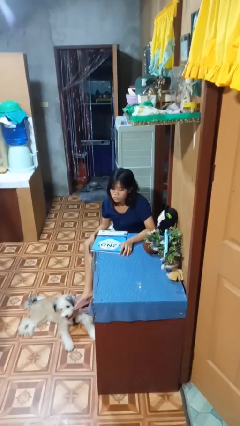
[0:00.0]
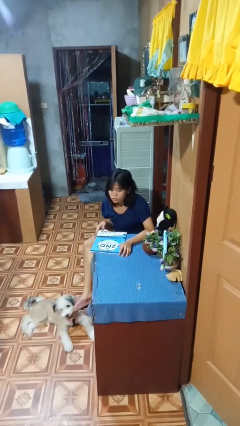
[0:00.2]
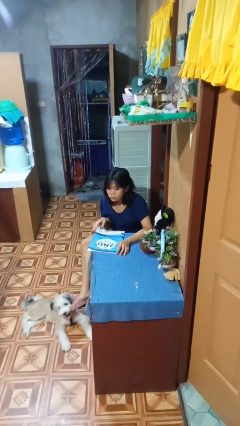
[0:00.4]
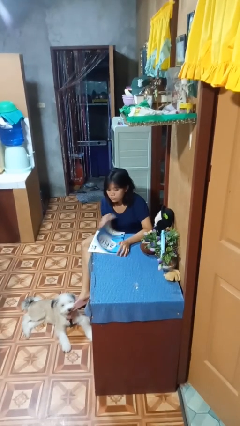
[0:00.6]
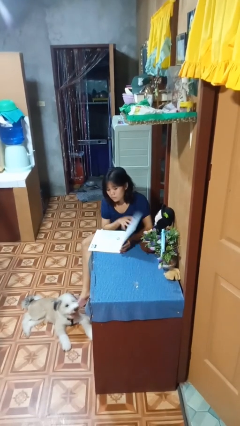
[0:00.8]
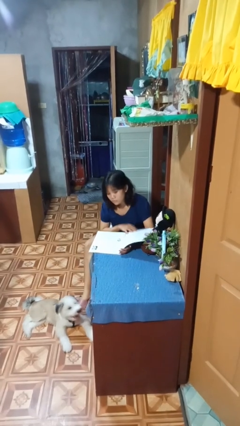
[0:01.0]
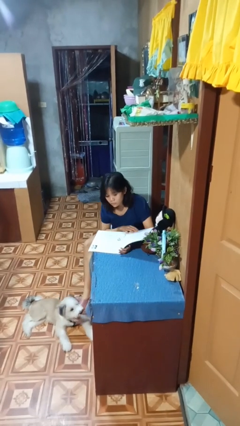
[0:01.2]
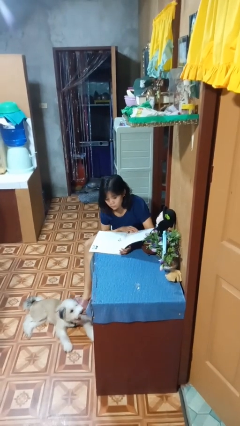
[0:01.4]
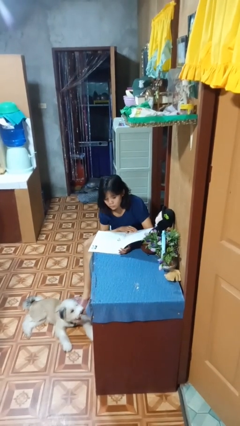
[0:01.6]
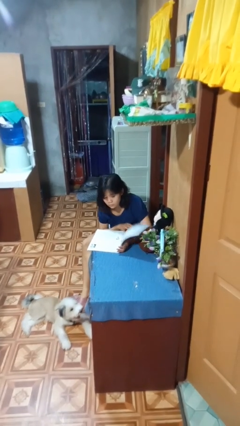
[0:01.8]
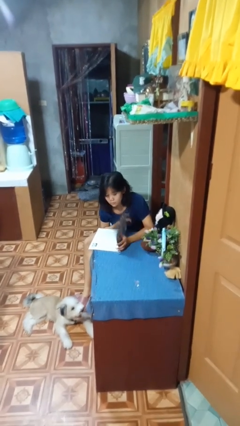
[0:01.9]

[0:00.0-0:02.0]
person reads magazine

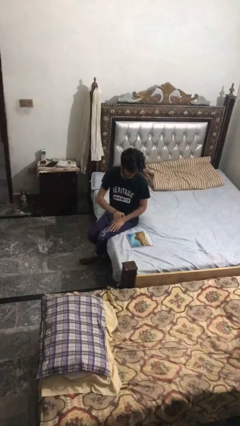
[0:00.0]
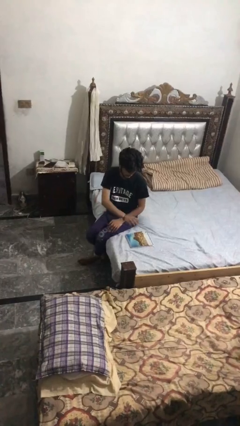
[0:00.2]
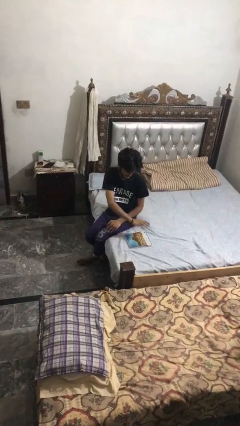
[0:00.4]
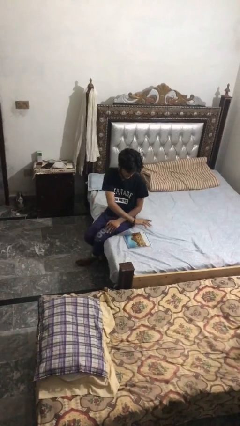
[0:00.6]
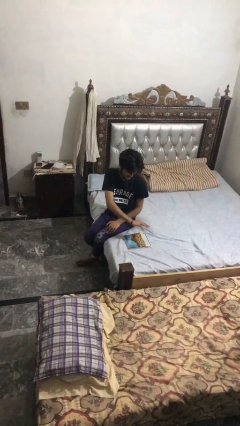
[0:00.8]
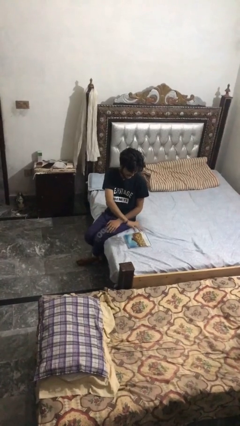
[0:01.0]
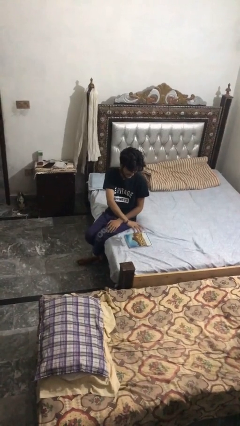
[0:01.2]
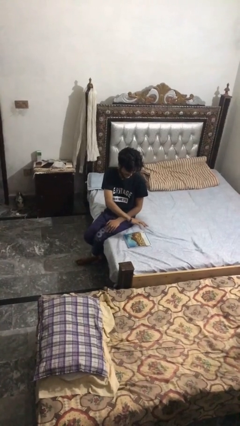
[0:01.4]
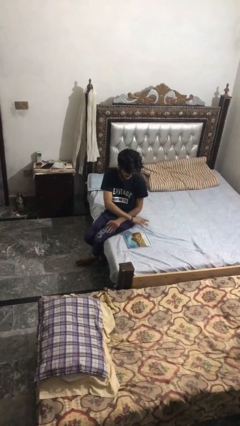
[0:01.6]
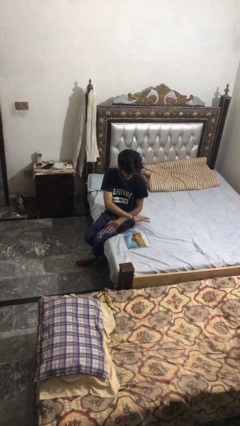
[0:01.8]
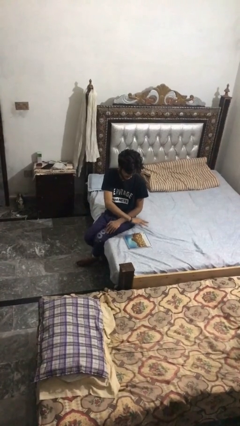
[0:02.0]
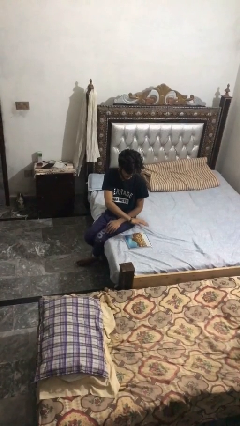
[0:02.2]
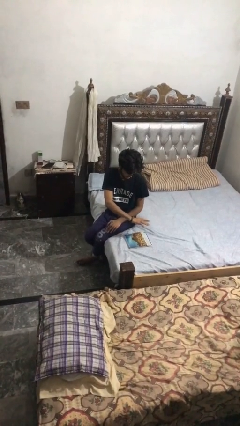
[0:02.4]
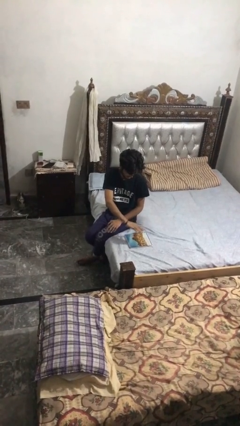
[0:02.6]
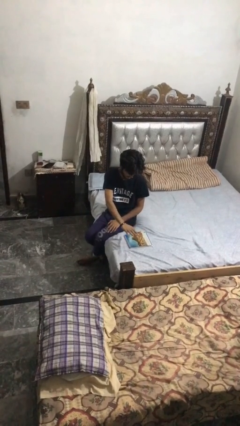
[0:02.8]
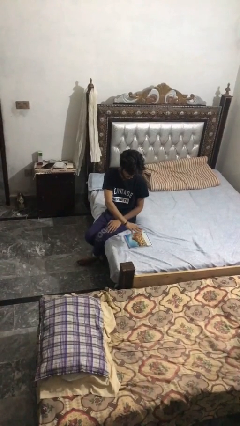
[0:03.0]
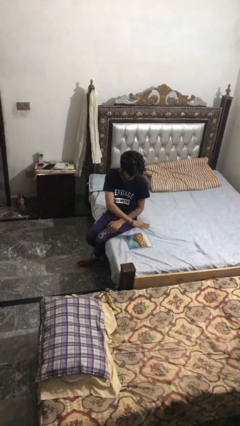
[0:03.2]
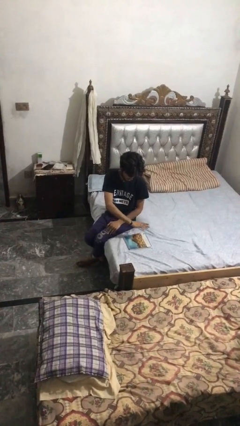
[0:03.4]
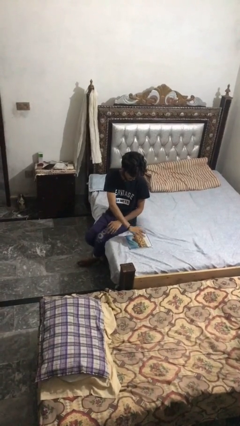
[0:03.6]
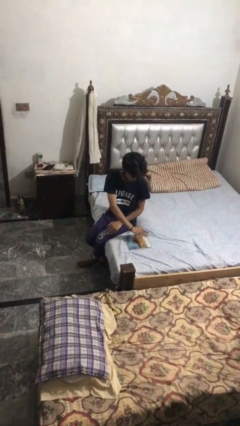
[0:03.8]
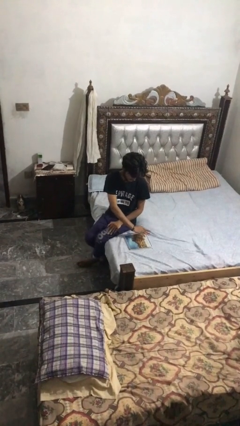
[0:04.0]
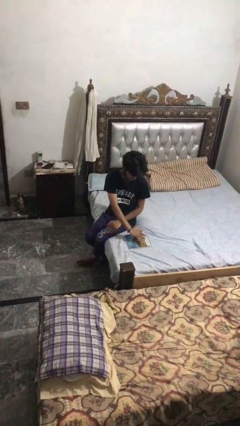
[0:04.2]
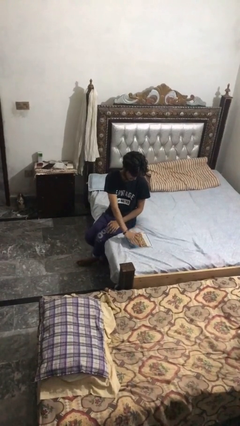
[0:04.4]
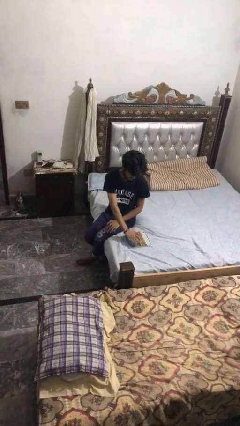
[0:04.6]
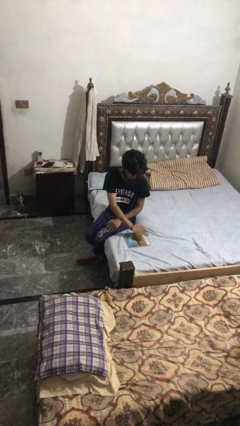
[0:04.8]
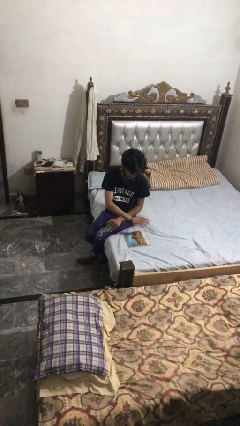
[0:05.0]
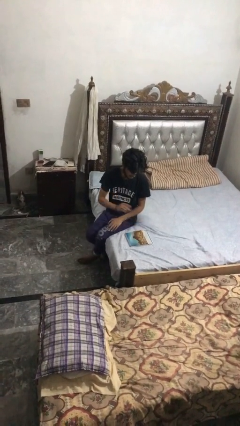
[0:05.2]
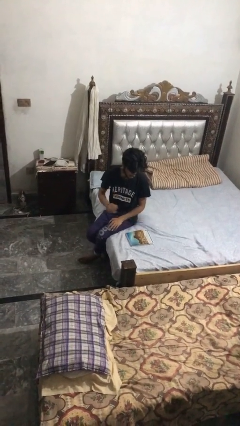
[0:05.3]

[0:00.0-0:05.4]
person waves hand over object

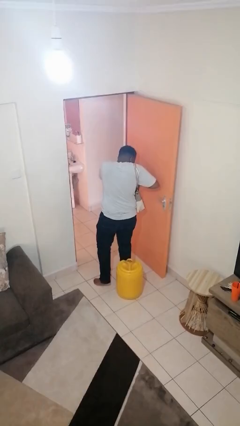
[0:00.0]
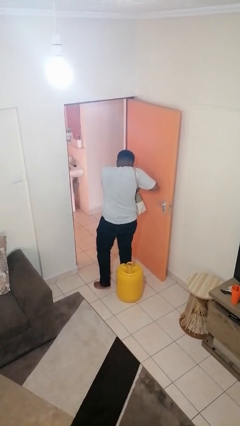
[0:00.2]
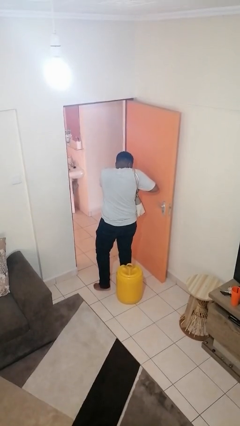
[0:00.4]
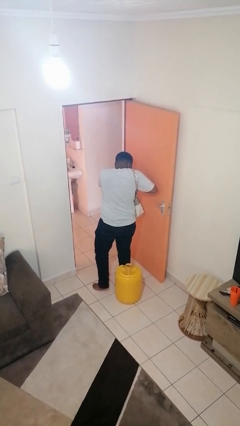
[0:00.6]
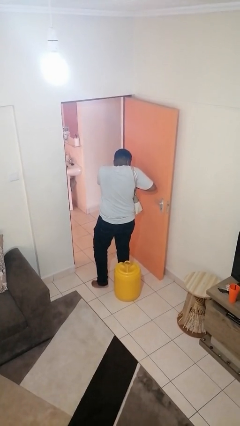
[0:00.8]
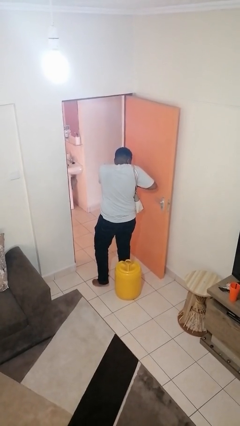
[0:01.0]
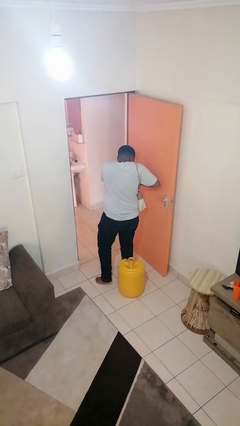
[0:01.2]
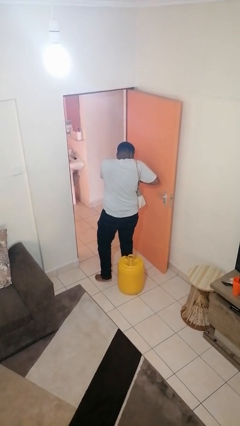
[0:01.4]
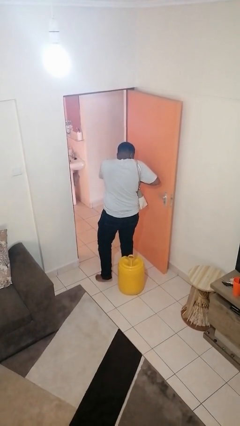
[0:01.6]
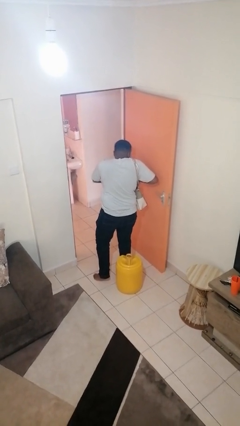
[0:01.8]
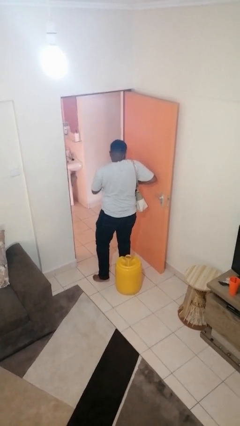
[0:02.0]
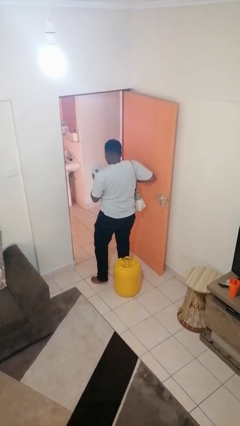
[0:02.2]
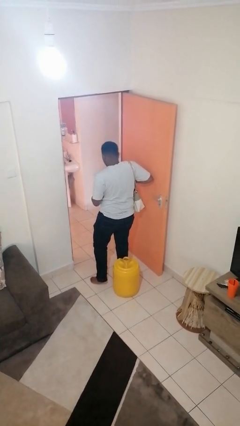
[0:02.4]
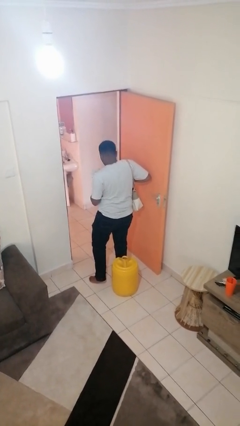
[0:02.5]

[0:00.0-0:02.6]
person searches in purse

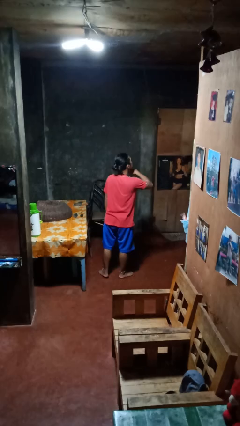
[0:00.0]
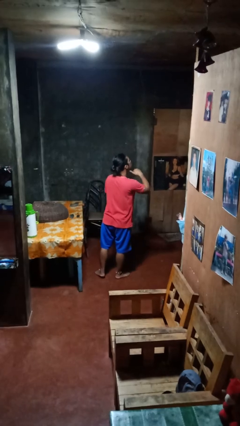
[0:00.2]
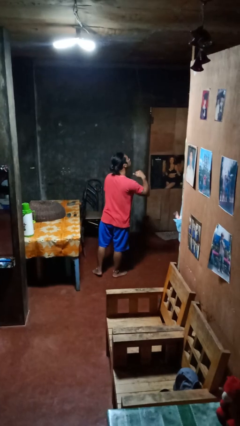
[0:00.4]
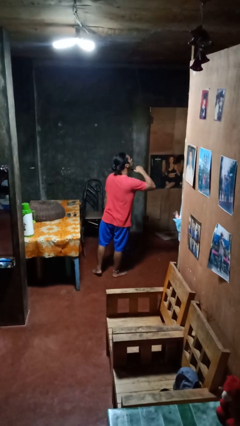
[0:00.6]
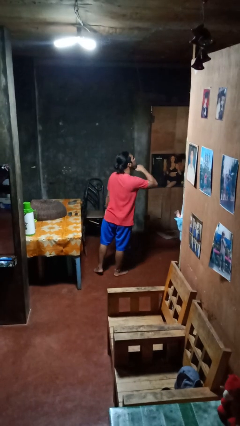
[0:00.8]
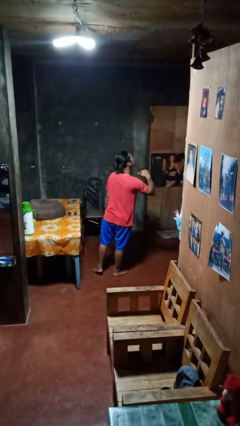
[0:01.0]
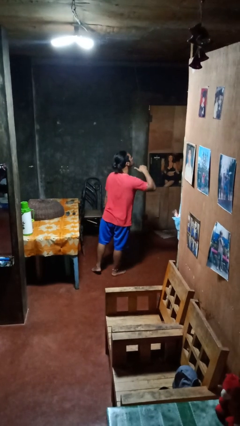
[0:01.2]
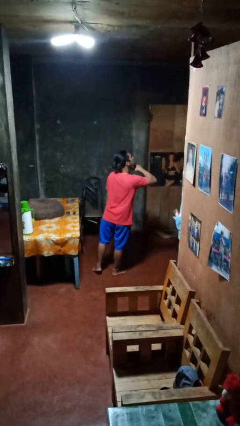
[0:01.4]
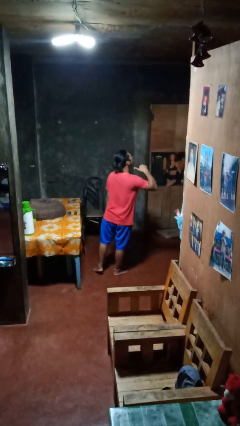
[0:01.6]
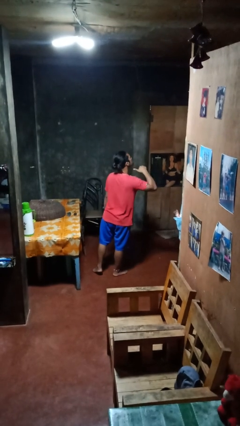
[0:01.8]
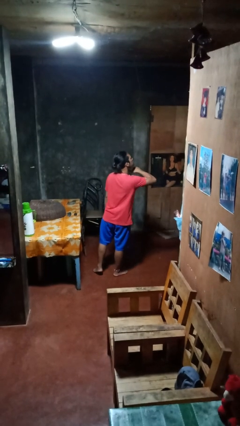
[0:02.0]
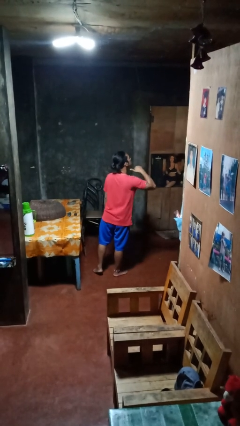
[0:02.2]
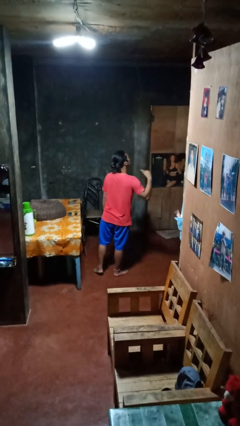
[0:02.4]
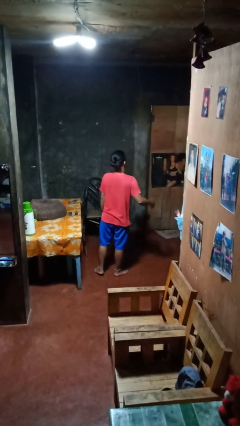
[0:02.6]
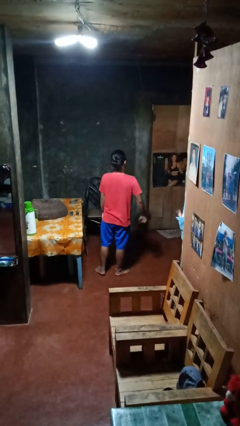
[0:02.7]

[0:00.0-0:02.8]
person gestures cut

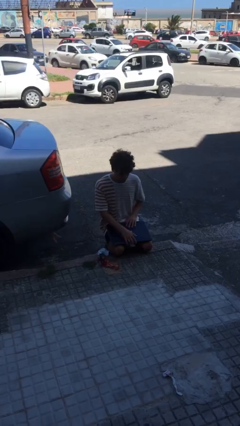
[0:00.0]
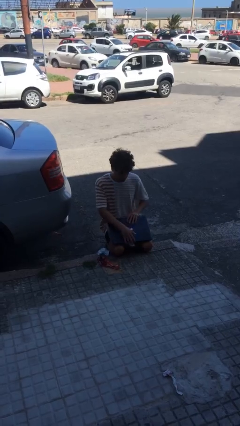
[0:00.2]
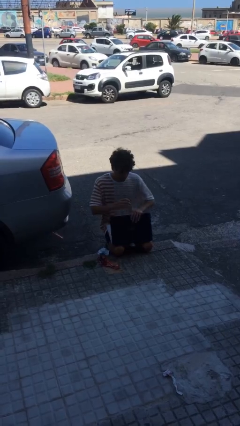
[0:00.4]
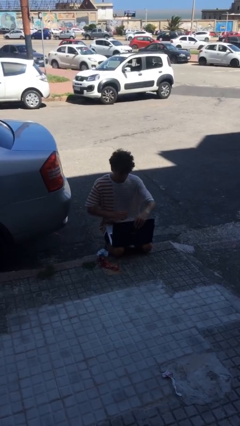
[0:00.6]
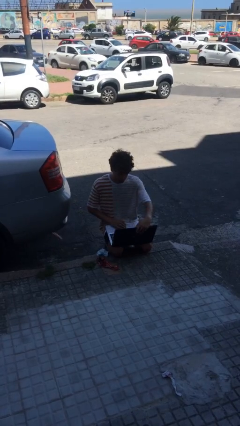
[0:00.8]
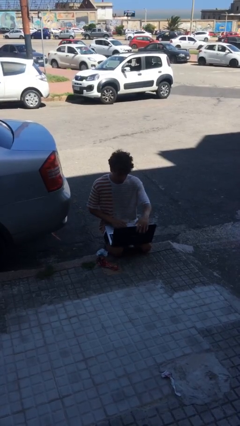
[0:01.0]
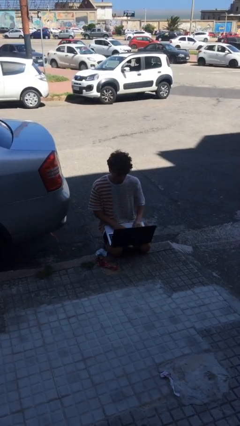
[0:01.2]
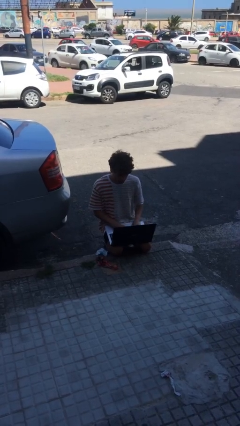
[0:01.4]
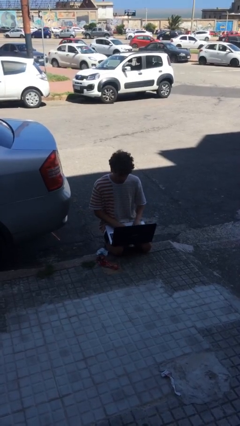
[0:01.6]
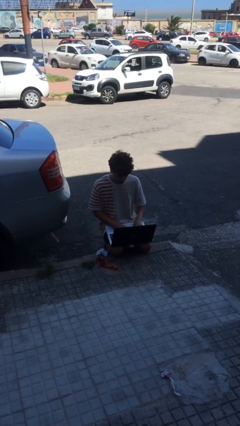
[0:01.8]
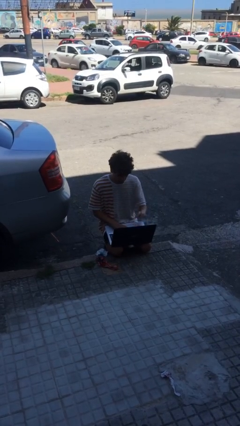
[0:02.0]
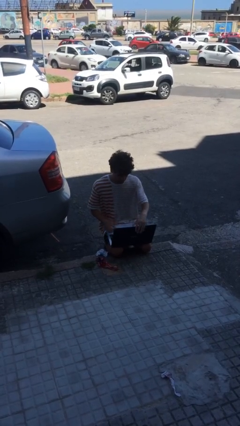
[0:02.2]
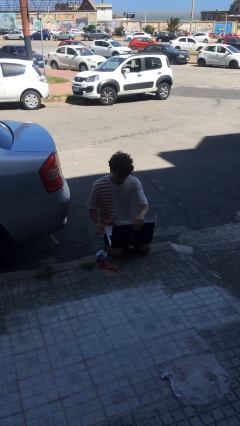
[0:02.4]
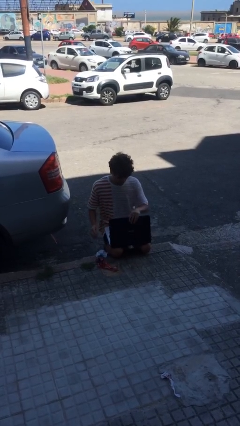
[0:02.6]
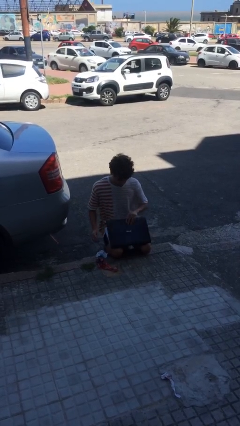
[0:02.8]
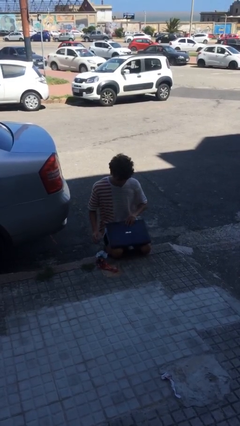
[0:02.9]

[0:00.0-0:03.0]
person interacts with laptop

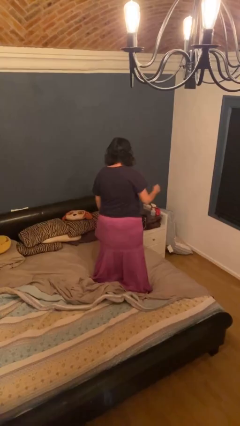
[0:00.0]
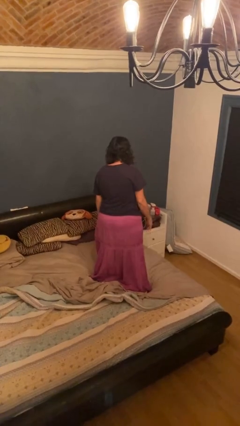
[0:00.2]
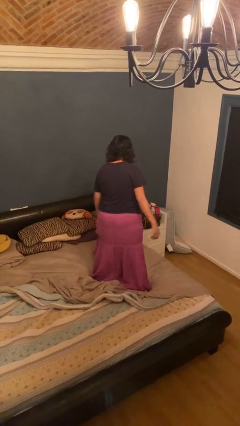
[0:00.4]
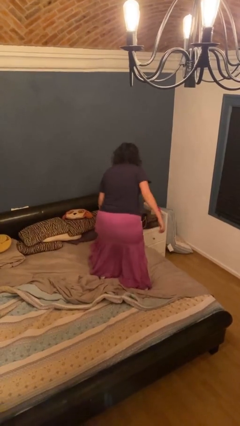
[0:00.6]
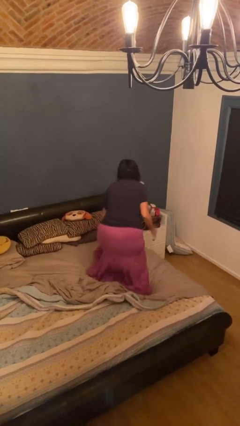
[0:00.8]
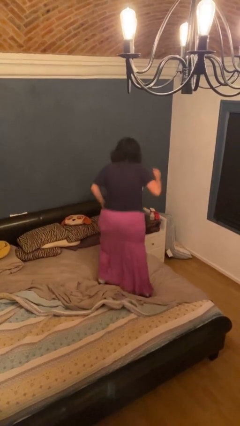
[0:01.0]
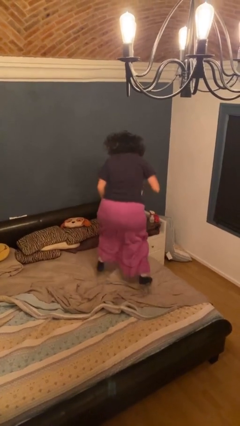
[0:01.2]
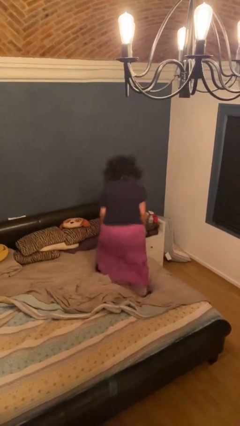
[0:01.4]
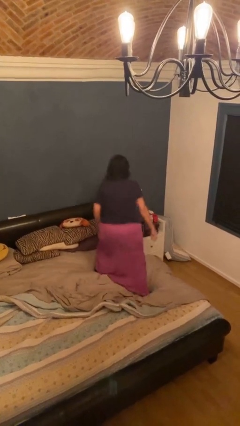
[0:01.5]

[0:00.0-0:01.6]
person jumps on bed
